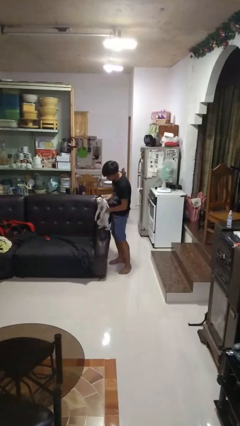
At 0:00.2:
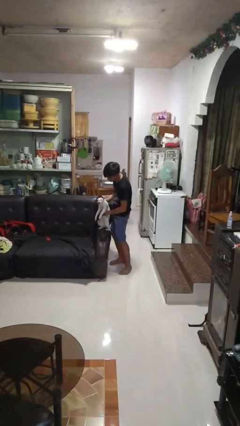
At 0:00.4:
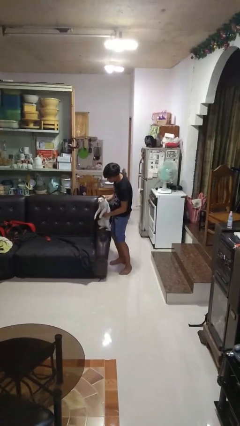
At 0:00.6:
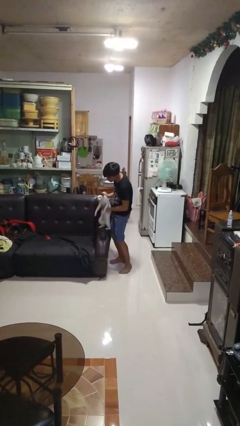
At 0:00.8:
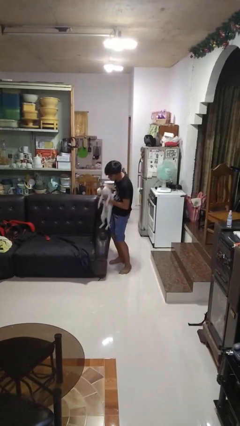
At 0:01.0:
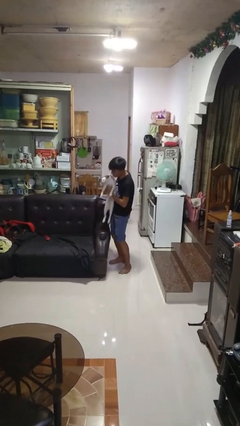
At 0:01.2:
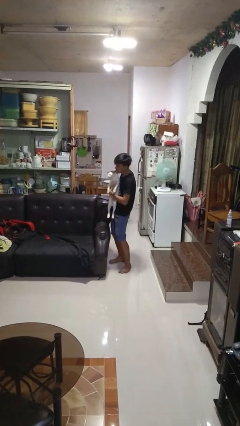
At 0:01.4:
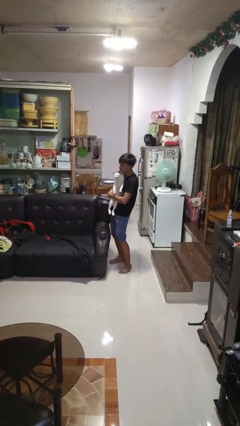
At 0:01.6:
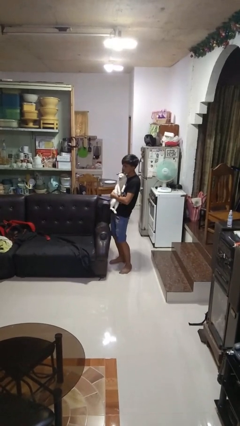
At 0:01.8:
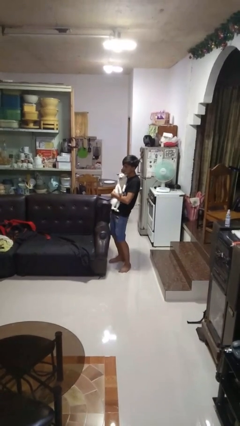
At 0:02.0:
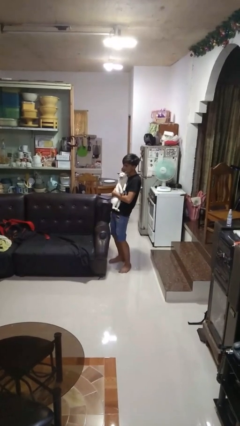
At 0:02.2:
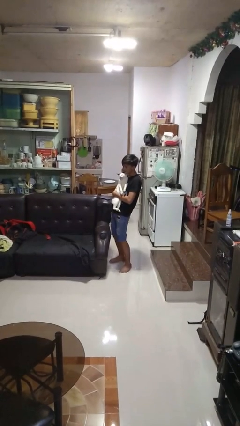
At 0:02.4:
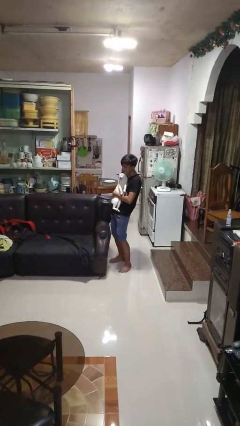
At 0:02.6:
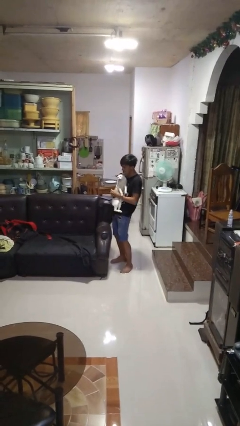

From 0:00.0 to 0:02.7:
person hugs cat

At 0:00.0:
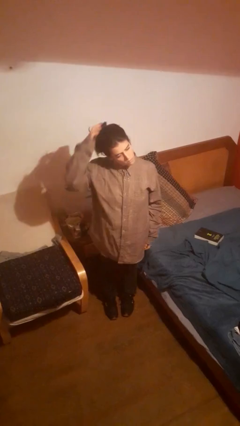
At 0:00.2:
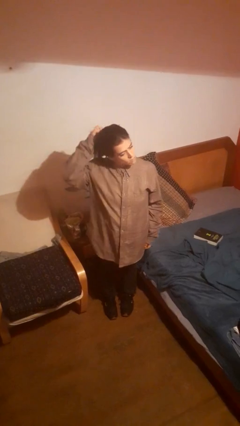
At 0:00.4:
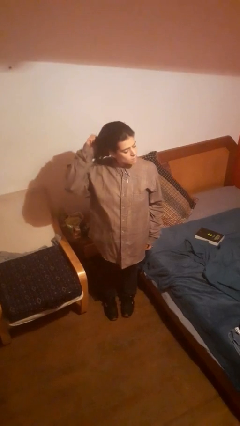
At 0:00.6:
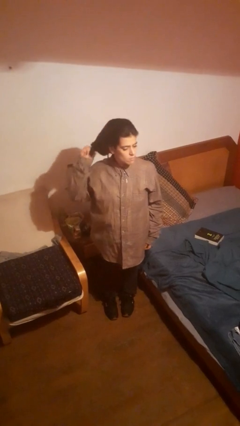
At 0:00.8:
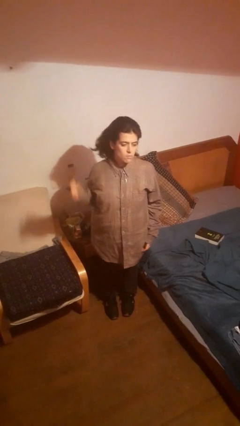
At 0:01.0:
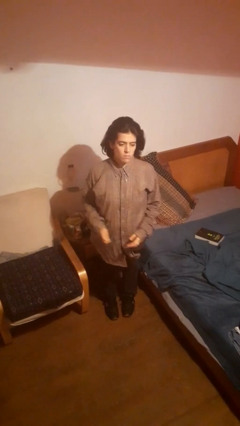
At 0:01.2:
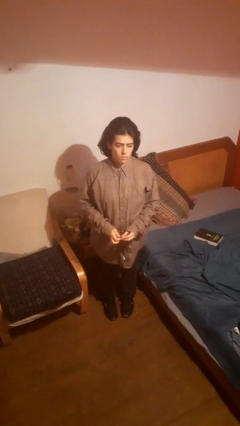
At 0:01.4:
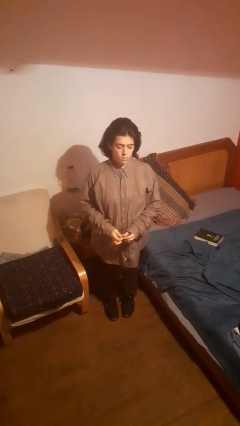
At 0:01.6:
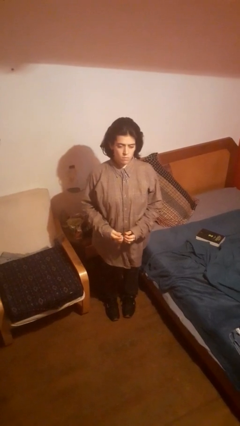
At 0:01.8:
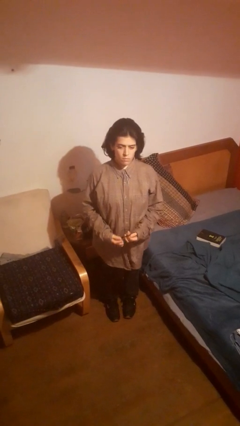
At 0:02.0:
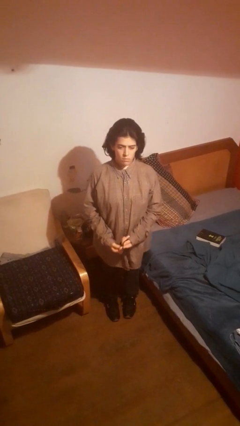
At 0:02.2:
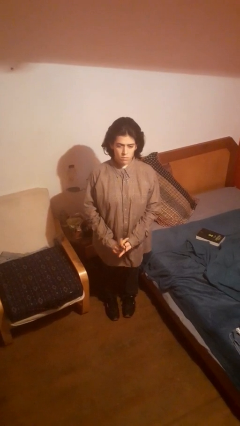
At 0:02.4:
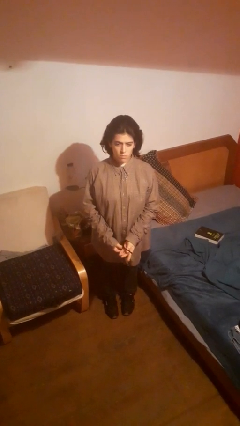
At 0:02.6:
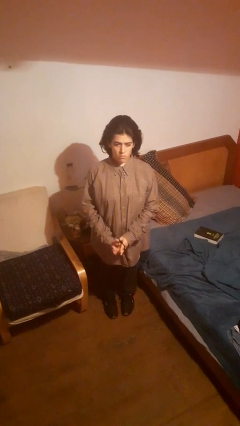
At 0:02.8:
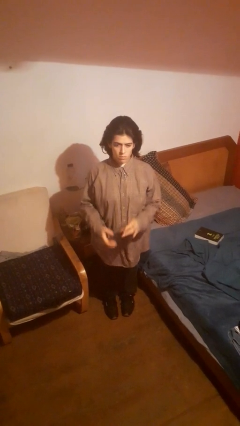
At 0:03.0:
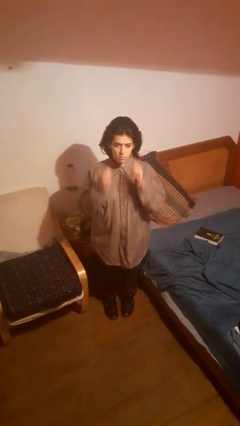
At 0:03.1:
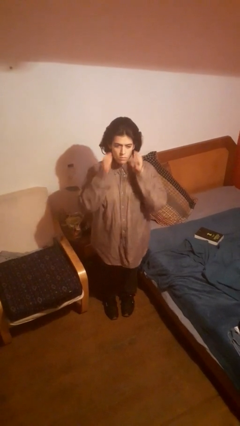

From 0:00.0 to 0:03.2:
person takes off hairtie

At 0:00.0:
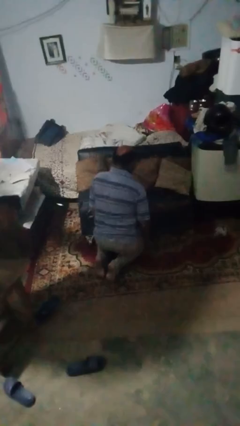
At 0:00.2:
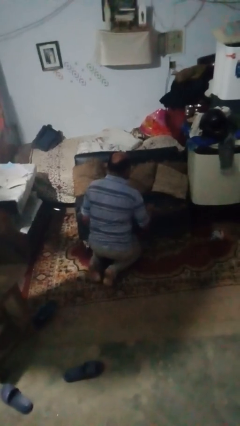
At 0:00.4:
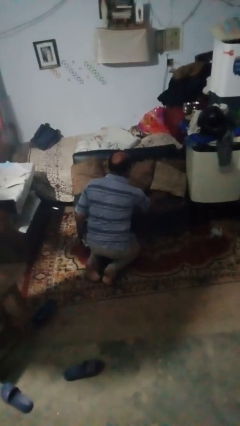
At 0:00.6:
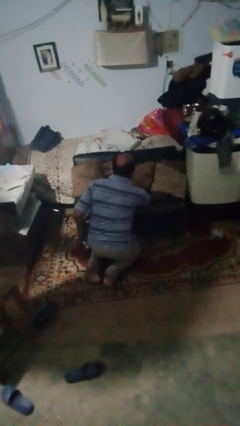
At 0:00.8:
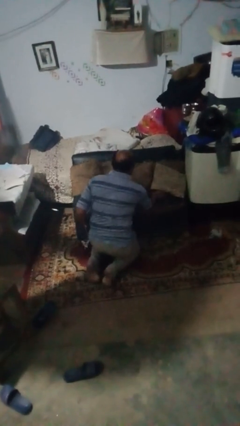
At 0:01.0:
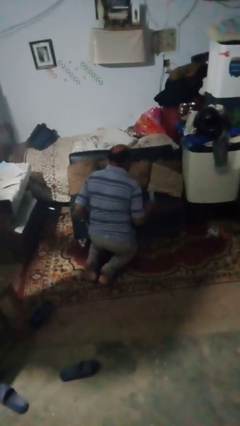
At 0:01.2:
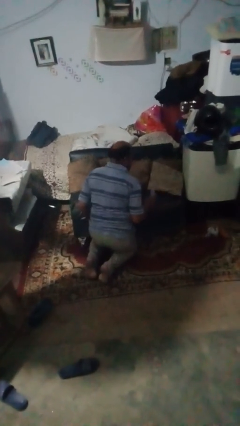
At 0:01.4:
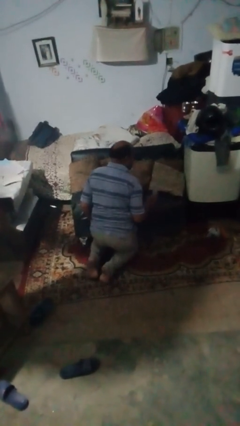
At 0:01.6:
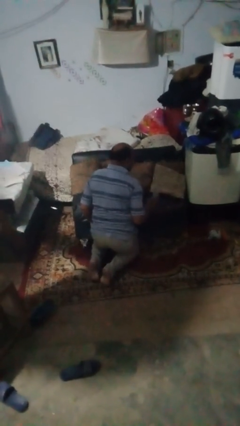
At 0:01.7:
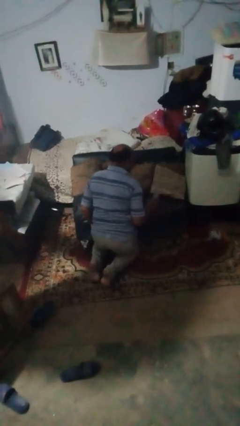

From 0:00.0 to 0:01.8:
person searches in couch

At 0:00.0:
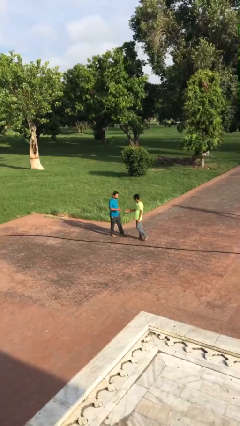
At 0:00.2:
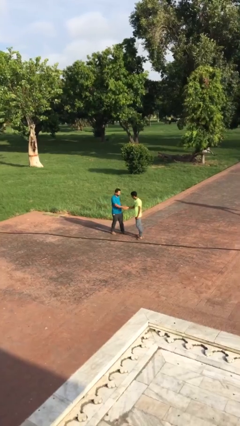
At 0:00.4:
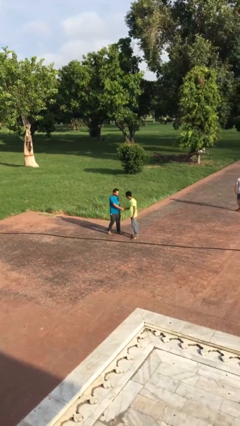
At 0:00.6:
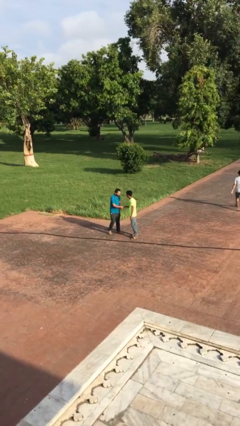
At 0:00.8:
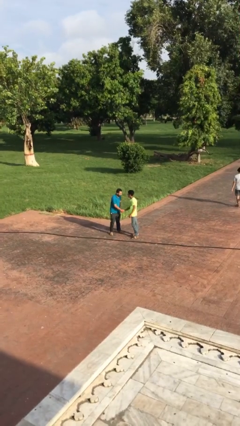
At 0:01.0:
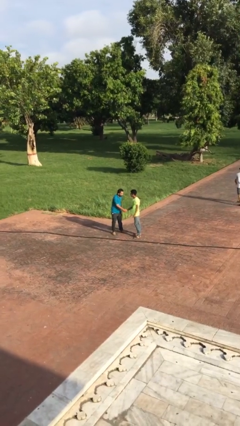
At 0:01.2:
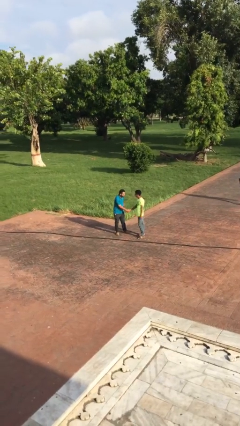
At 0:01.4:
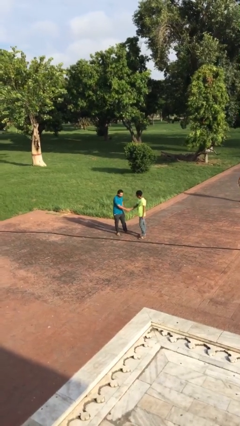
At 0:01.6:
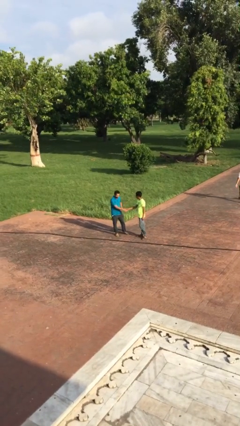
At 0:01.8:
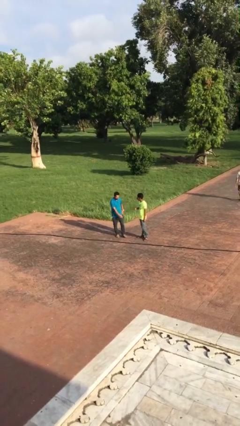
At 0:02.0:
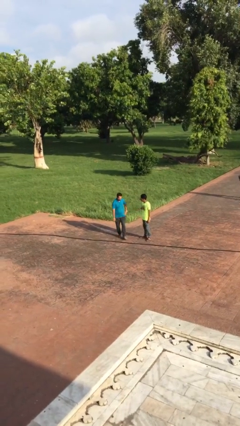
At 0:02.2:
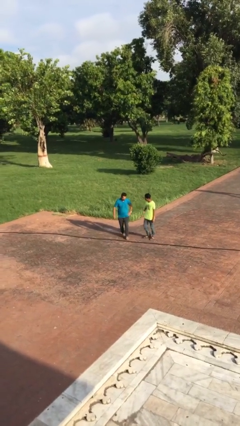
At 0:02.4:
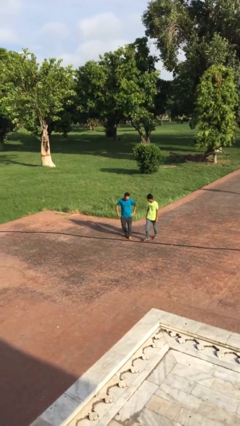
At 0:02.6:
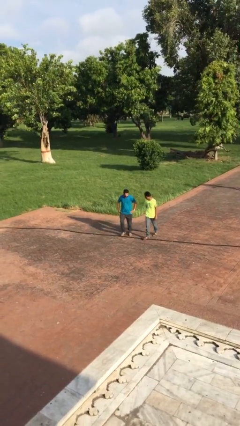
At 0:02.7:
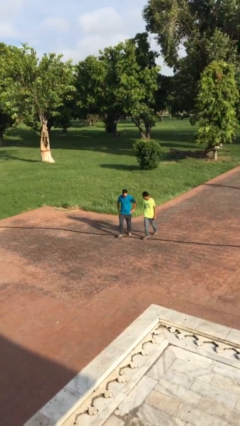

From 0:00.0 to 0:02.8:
person shakes hand

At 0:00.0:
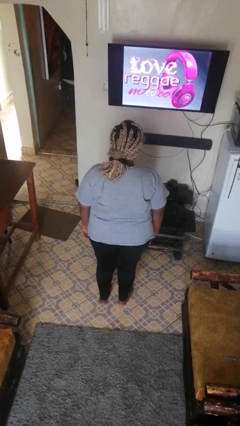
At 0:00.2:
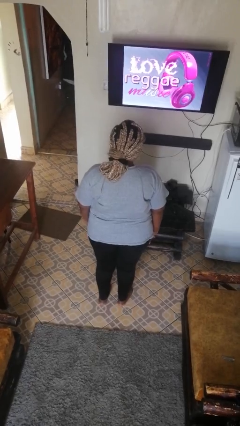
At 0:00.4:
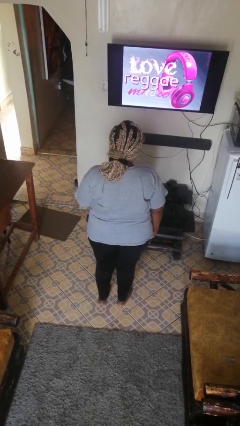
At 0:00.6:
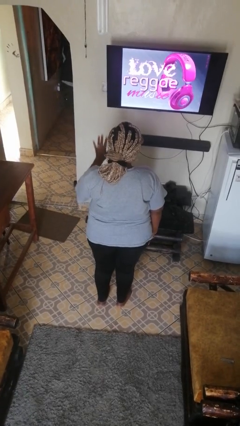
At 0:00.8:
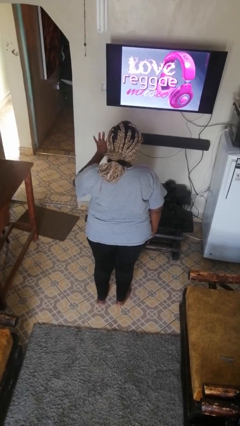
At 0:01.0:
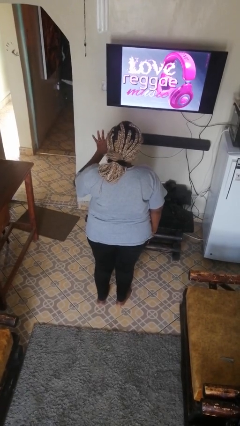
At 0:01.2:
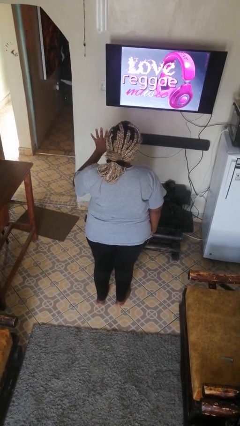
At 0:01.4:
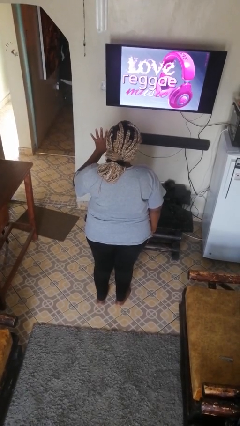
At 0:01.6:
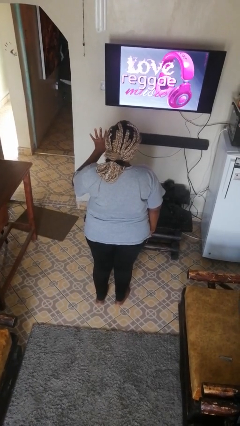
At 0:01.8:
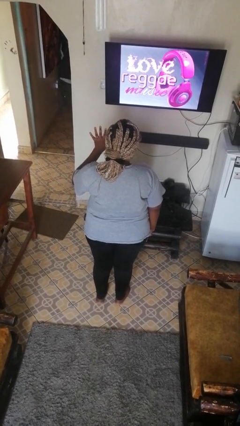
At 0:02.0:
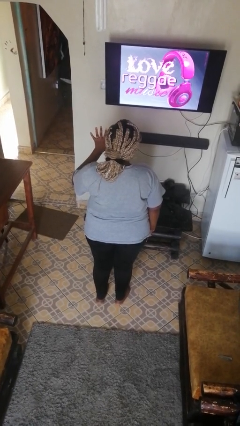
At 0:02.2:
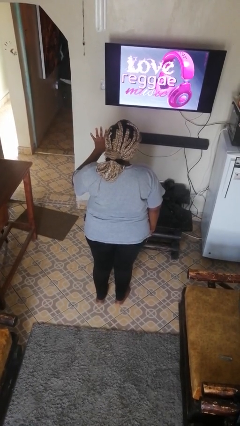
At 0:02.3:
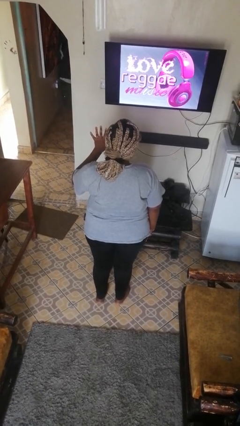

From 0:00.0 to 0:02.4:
person gestures stop

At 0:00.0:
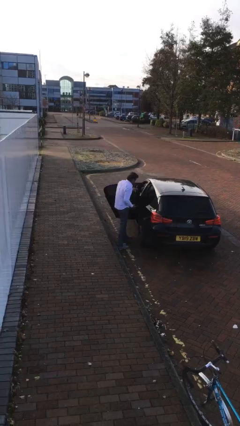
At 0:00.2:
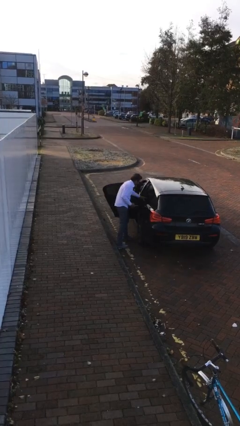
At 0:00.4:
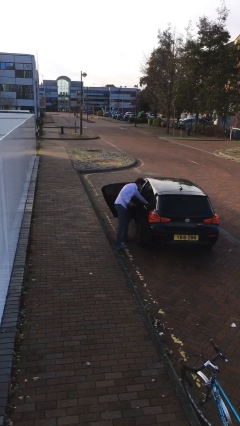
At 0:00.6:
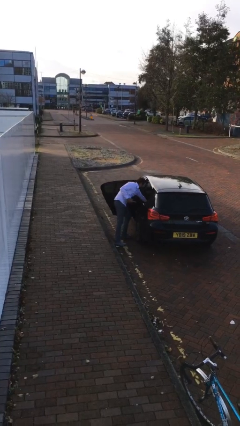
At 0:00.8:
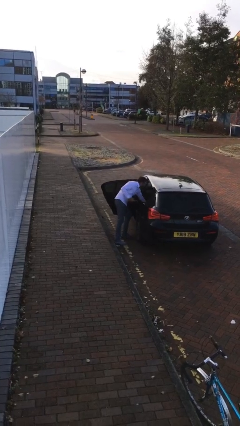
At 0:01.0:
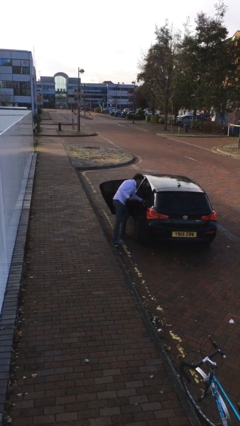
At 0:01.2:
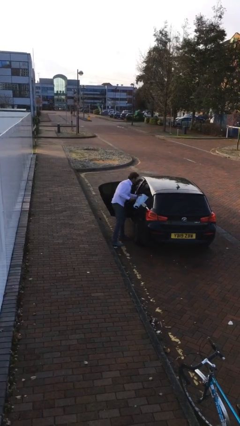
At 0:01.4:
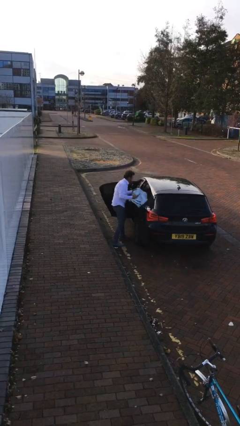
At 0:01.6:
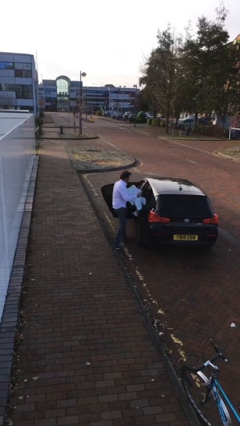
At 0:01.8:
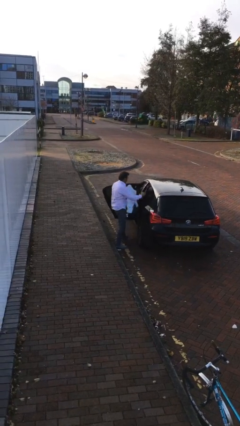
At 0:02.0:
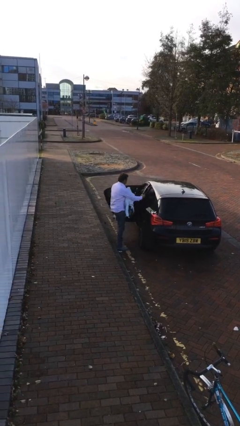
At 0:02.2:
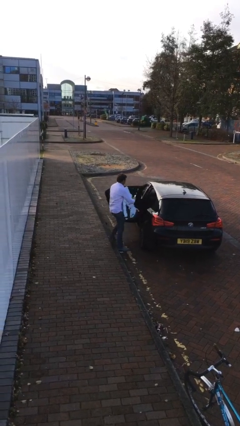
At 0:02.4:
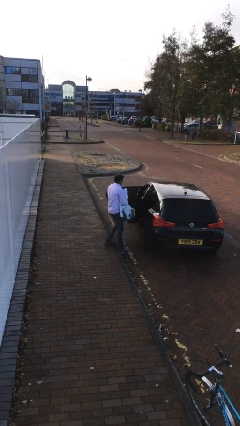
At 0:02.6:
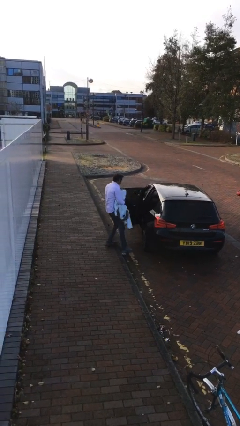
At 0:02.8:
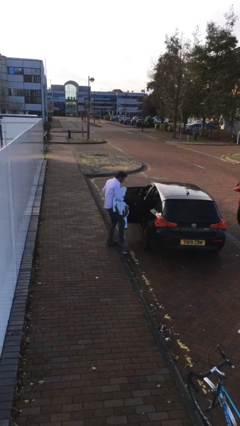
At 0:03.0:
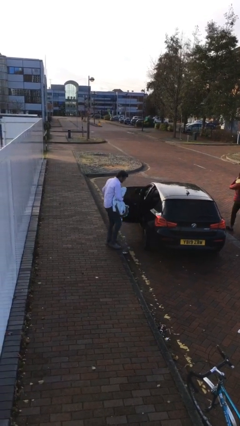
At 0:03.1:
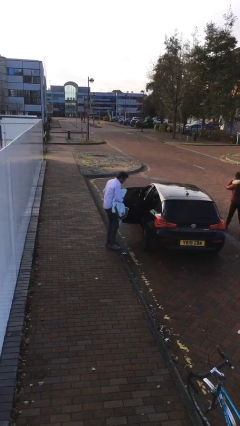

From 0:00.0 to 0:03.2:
person unloads car

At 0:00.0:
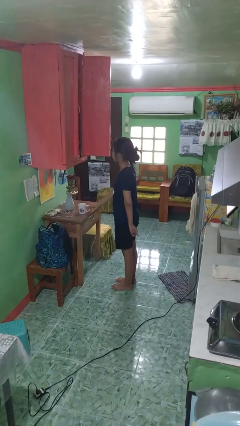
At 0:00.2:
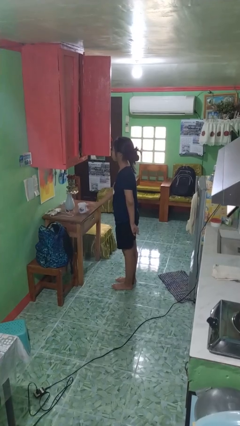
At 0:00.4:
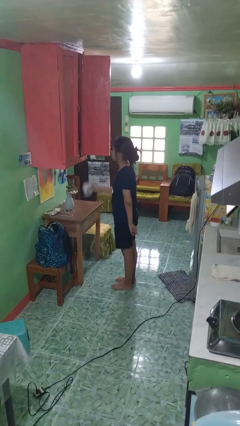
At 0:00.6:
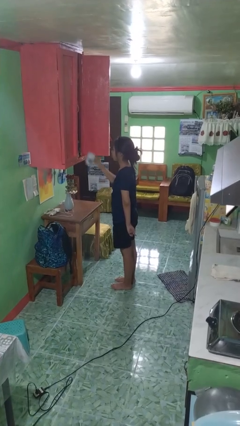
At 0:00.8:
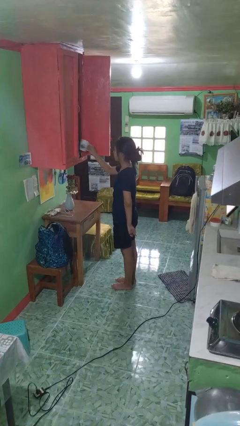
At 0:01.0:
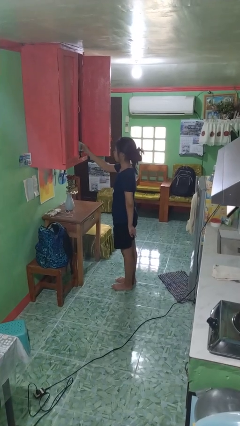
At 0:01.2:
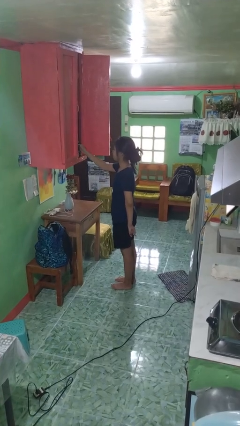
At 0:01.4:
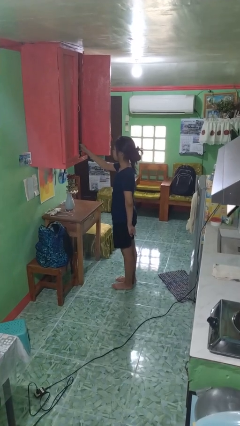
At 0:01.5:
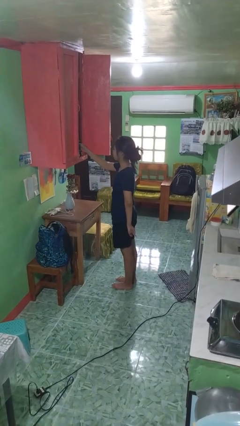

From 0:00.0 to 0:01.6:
person puts object in cabinet
